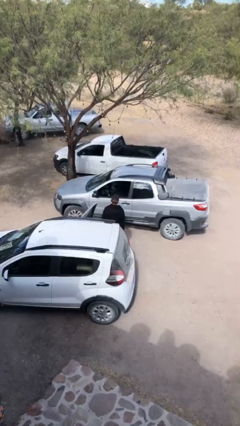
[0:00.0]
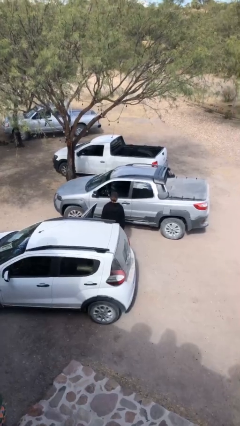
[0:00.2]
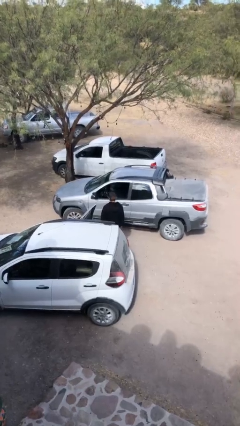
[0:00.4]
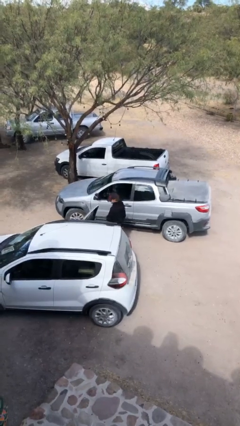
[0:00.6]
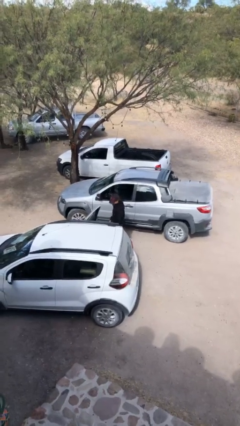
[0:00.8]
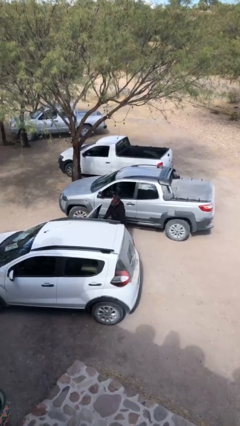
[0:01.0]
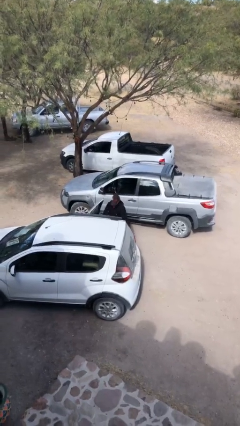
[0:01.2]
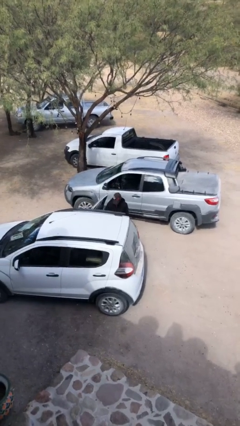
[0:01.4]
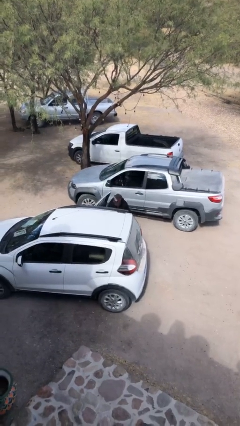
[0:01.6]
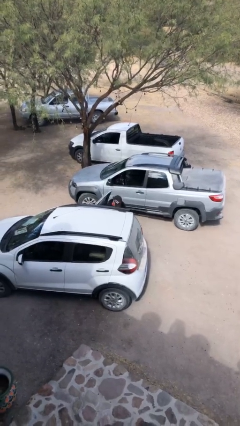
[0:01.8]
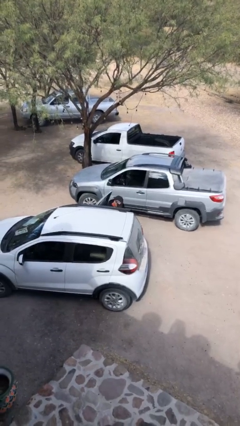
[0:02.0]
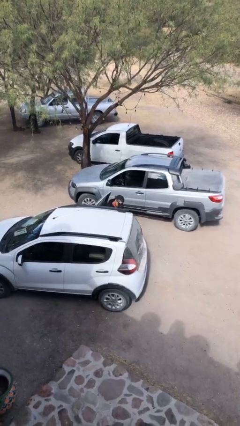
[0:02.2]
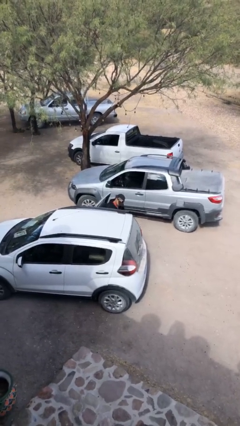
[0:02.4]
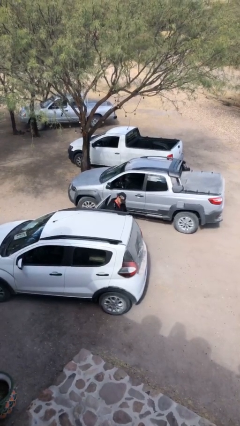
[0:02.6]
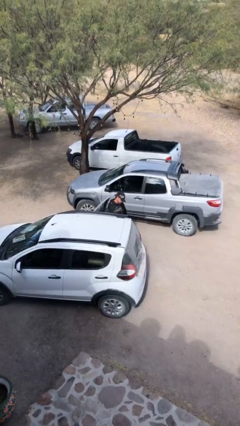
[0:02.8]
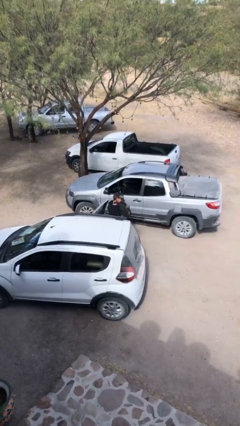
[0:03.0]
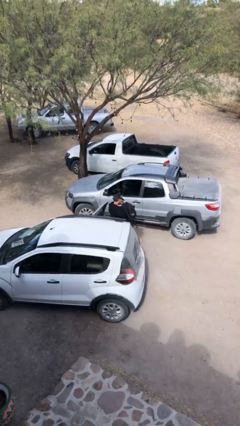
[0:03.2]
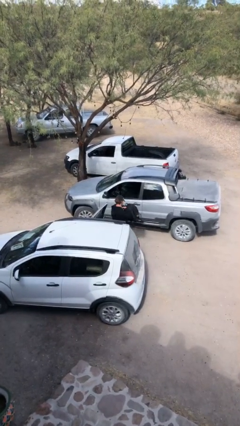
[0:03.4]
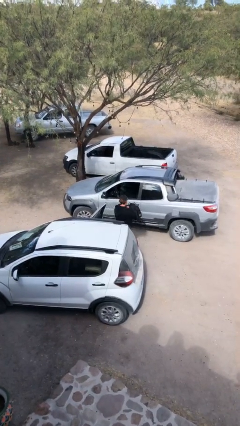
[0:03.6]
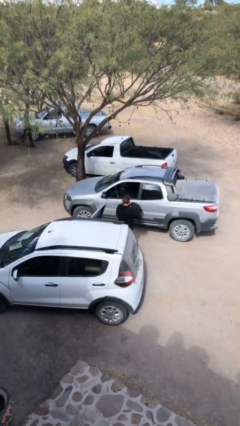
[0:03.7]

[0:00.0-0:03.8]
person unloads car

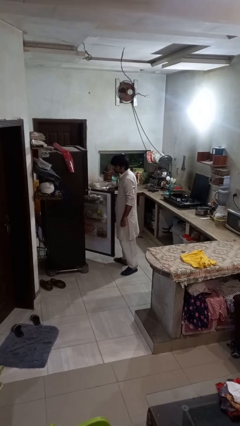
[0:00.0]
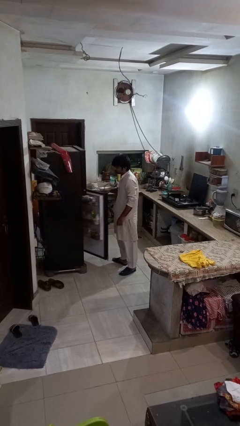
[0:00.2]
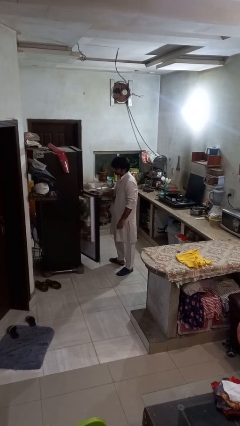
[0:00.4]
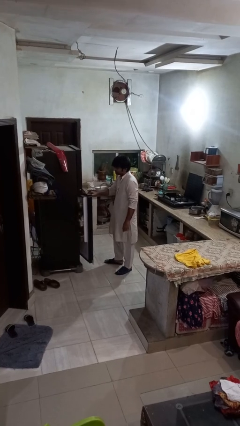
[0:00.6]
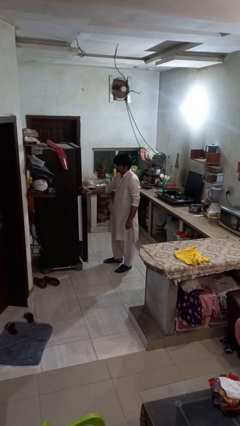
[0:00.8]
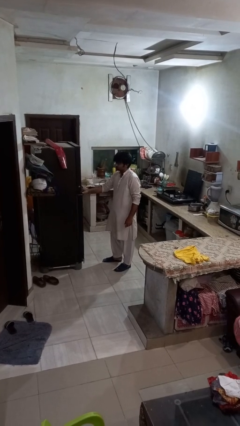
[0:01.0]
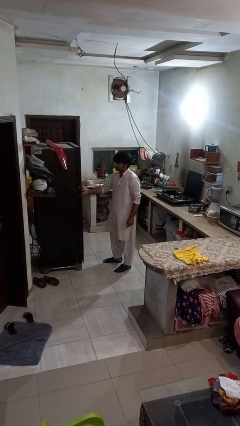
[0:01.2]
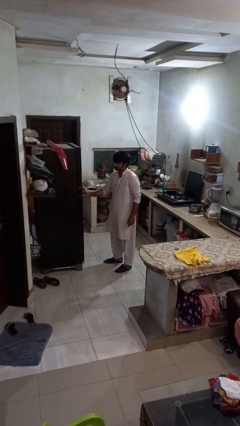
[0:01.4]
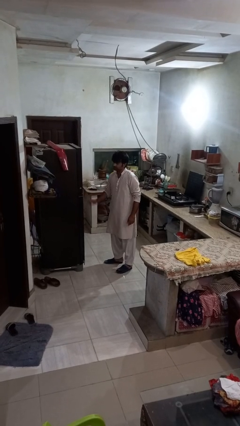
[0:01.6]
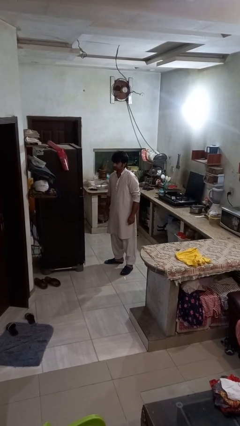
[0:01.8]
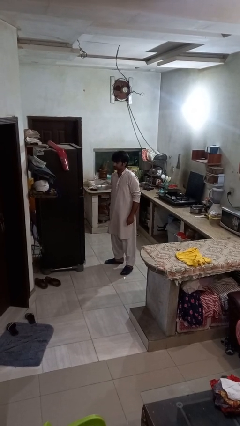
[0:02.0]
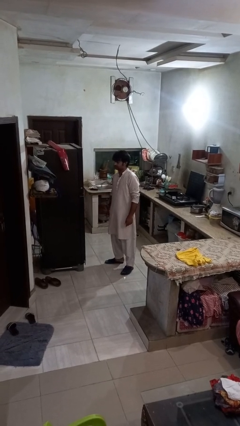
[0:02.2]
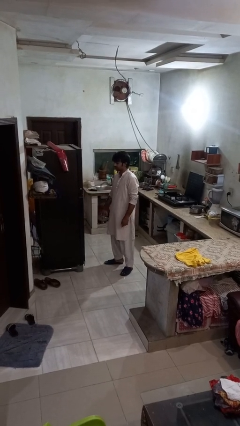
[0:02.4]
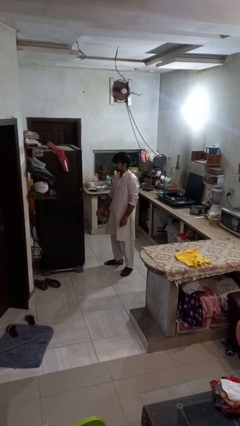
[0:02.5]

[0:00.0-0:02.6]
person closes refrigerator

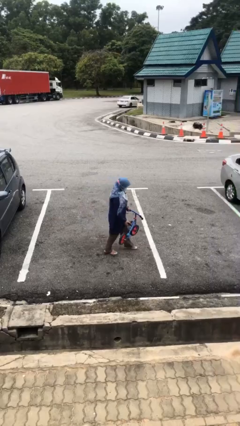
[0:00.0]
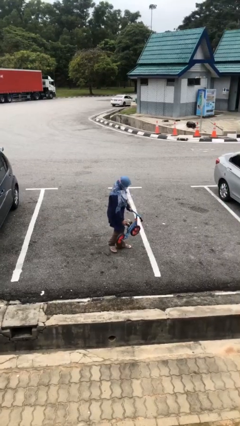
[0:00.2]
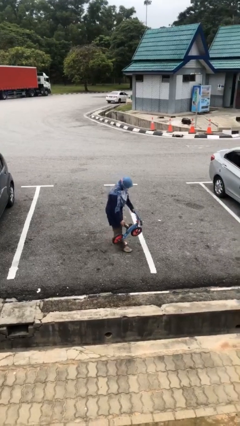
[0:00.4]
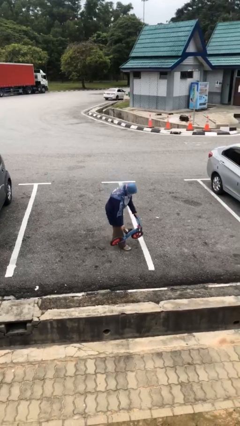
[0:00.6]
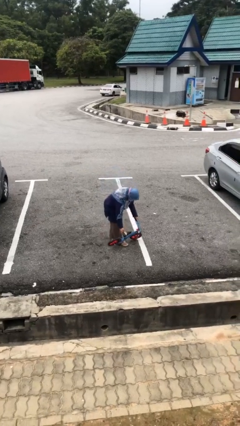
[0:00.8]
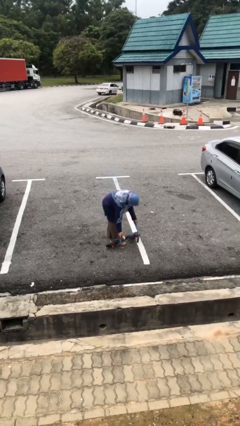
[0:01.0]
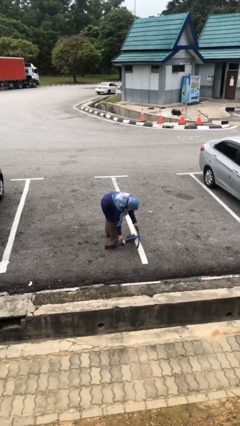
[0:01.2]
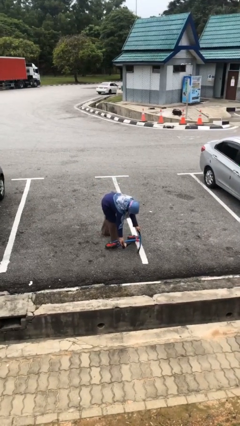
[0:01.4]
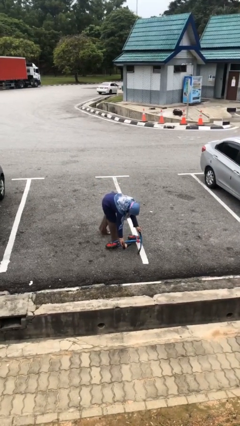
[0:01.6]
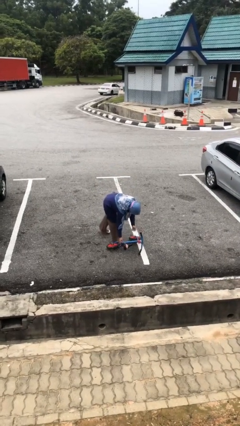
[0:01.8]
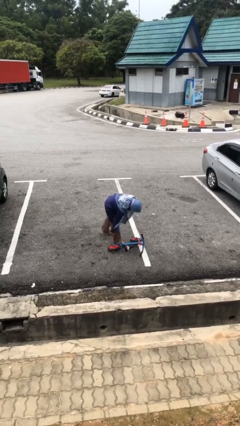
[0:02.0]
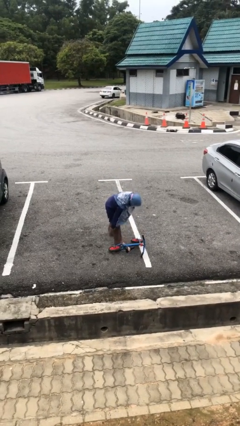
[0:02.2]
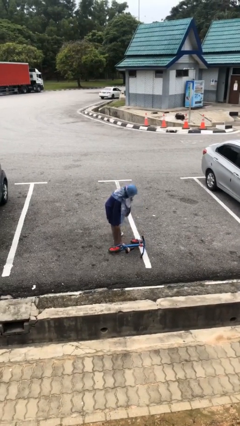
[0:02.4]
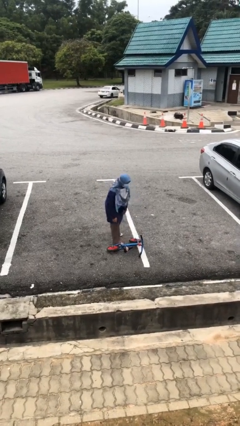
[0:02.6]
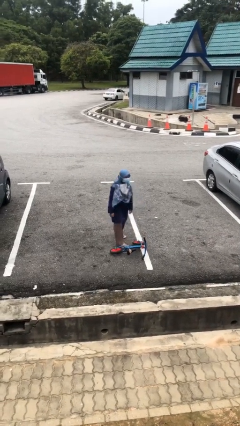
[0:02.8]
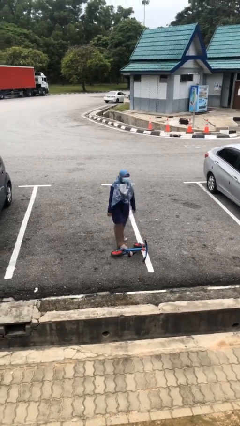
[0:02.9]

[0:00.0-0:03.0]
person puts down object on floor

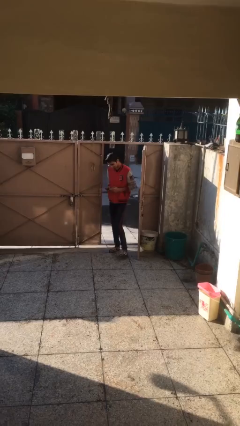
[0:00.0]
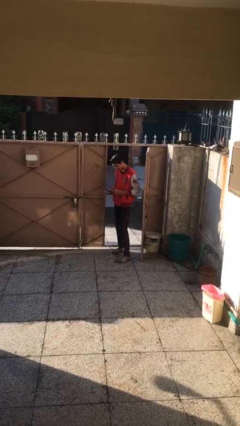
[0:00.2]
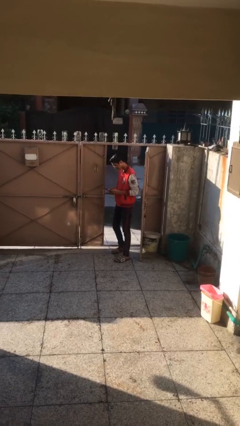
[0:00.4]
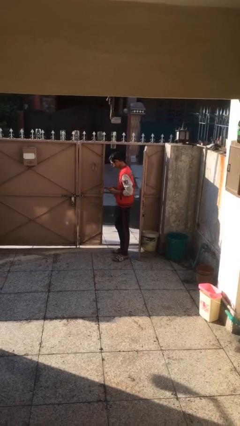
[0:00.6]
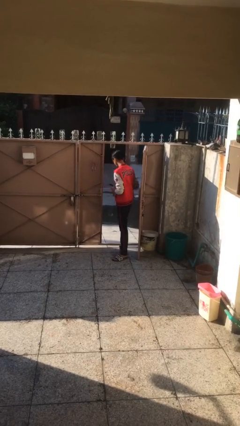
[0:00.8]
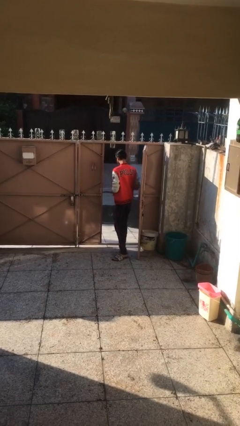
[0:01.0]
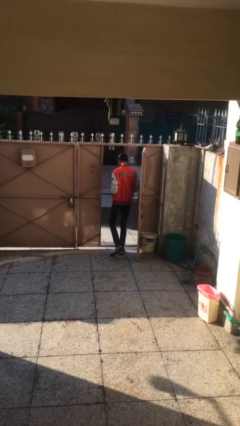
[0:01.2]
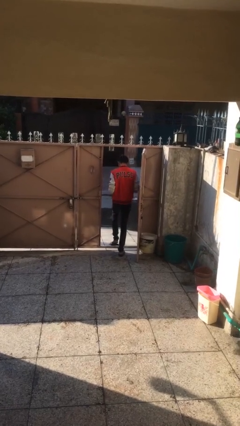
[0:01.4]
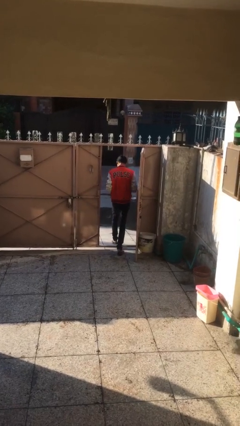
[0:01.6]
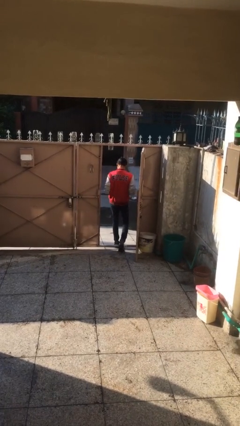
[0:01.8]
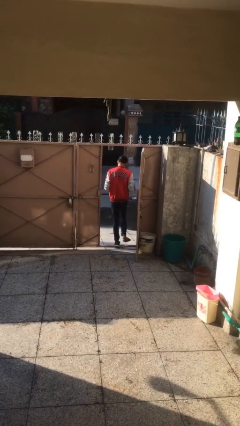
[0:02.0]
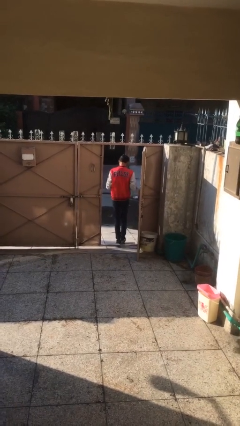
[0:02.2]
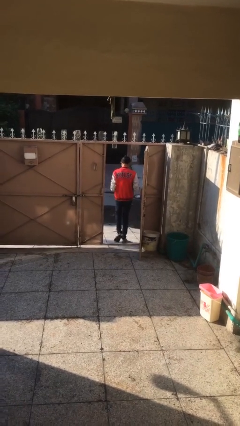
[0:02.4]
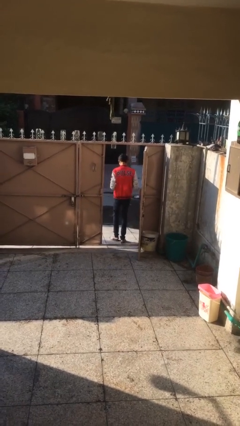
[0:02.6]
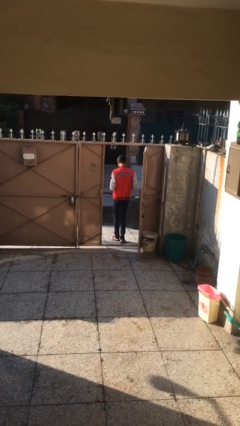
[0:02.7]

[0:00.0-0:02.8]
person exits scene through structure

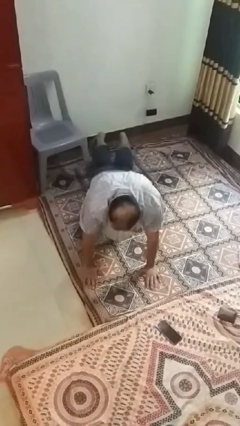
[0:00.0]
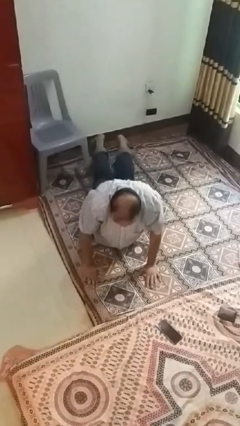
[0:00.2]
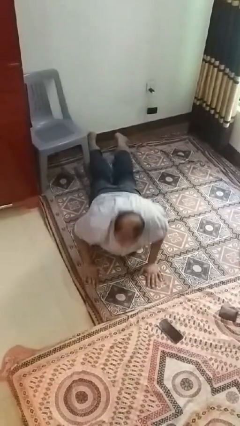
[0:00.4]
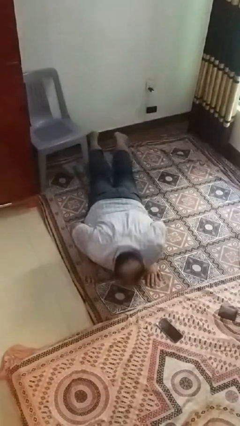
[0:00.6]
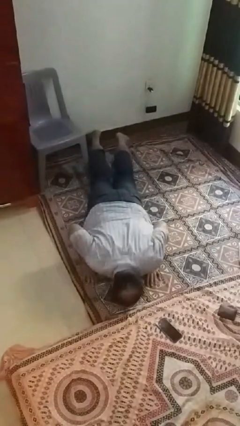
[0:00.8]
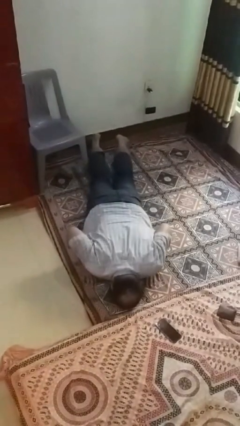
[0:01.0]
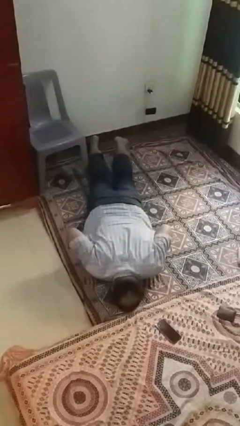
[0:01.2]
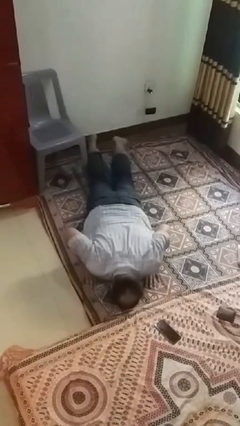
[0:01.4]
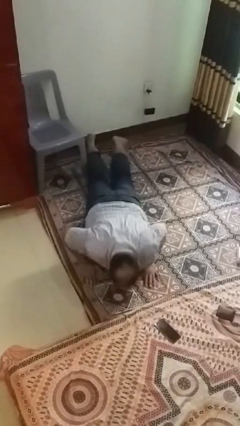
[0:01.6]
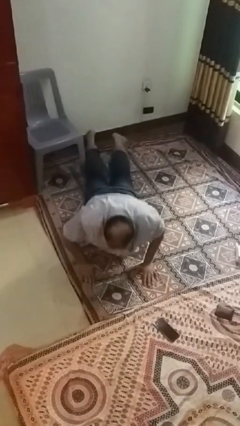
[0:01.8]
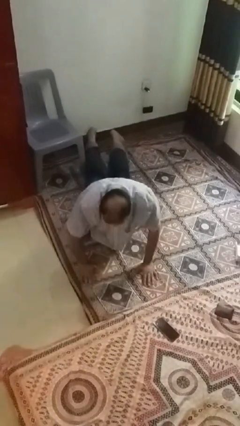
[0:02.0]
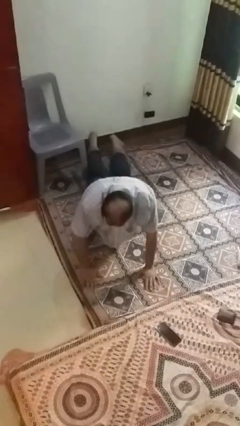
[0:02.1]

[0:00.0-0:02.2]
person exercises with pushup

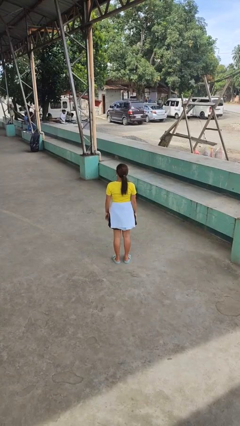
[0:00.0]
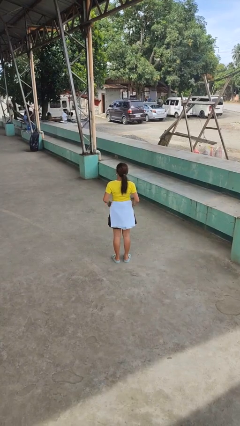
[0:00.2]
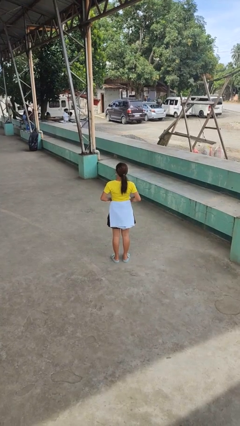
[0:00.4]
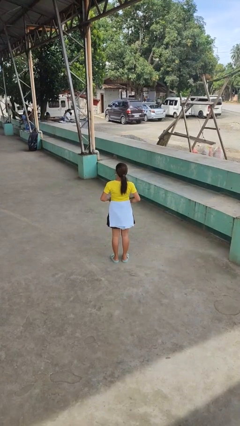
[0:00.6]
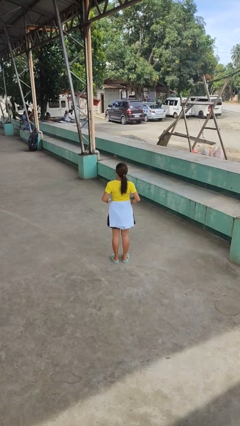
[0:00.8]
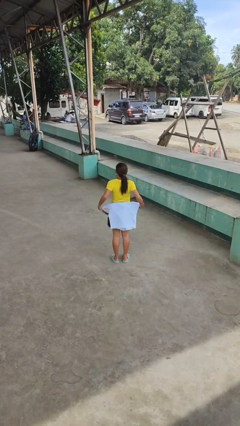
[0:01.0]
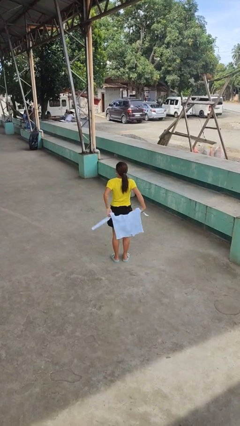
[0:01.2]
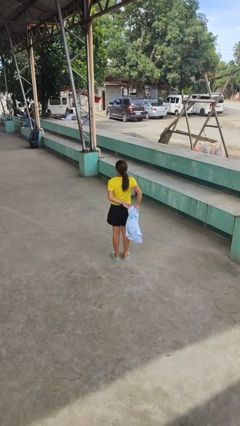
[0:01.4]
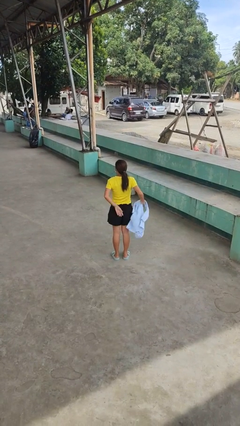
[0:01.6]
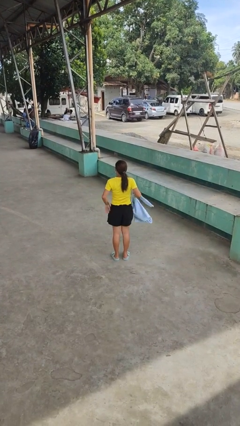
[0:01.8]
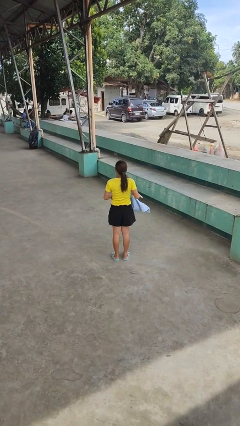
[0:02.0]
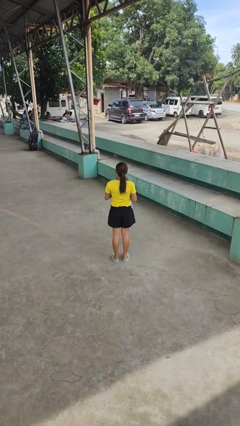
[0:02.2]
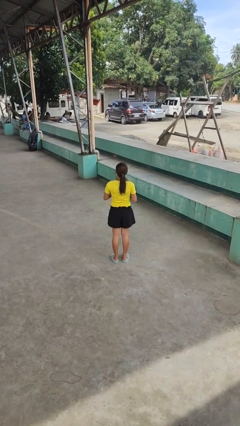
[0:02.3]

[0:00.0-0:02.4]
person unties jacket around waist

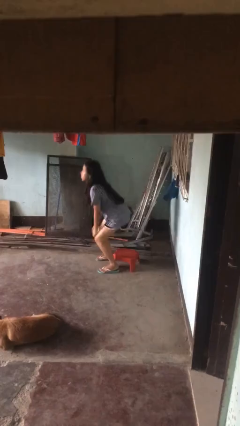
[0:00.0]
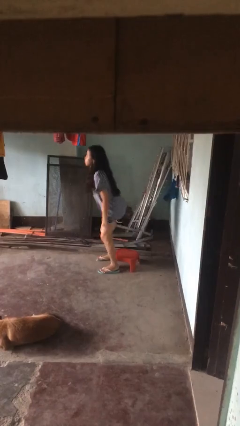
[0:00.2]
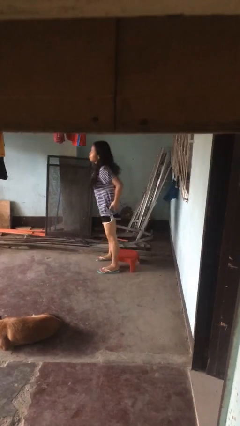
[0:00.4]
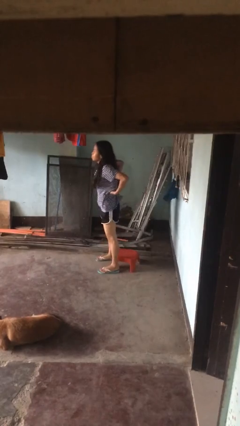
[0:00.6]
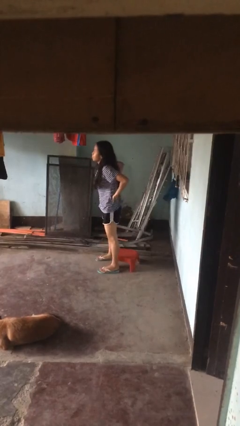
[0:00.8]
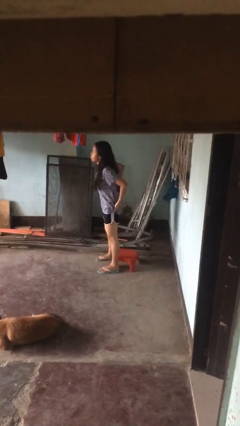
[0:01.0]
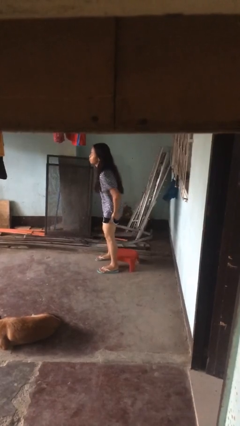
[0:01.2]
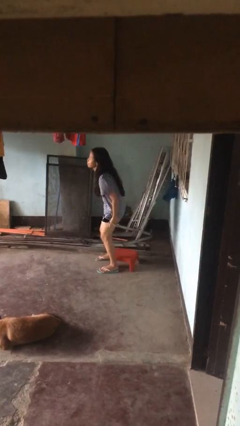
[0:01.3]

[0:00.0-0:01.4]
person stands up
